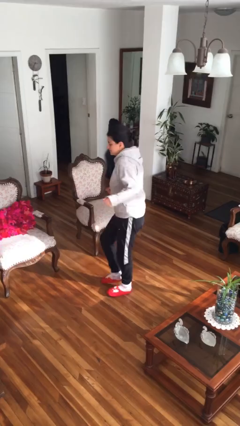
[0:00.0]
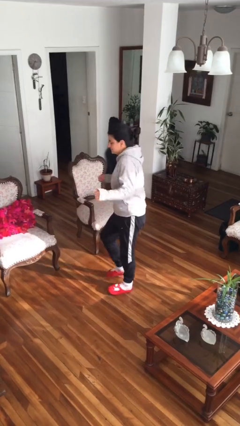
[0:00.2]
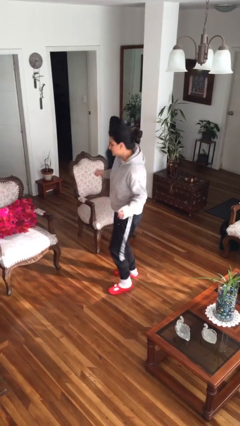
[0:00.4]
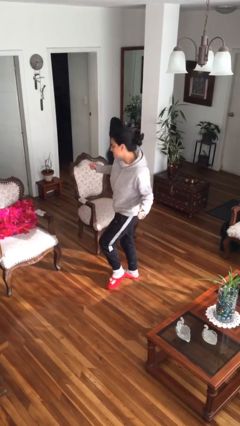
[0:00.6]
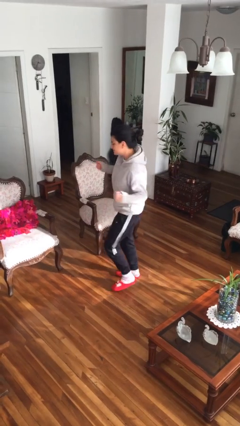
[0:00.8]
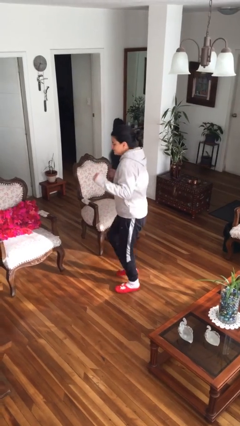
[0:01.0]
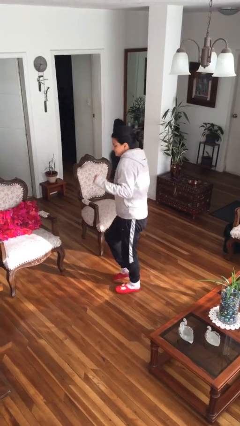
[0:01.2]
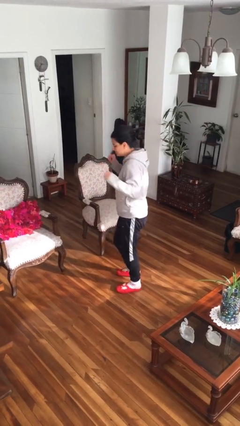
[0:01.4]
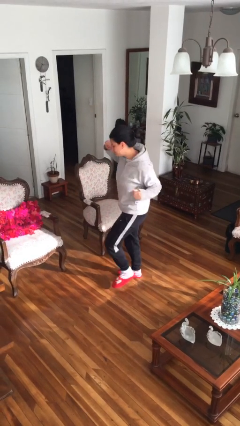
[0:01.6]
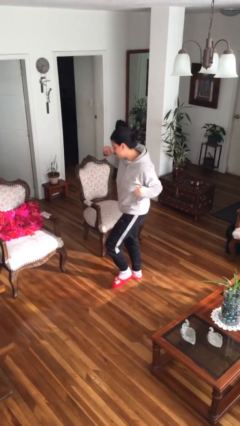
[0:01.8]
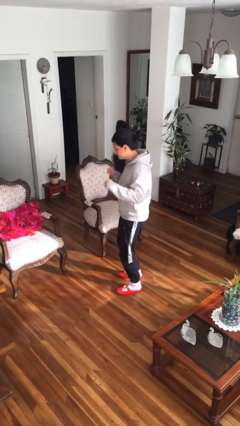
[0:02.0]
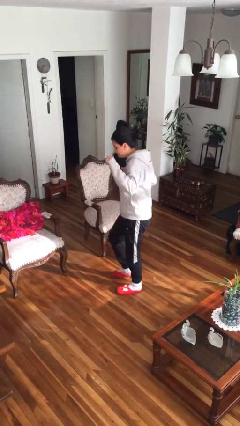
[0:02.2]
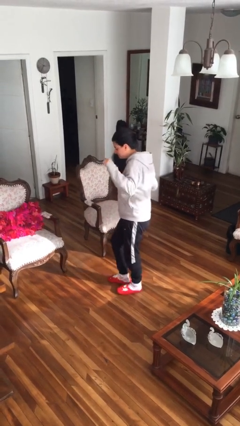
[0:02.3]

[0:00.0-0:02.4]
person dances in place

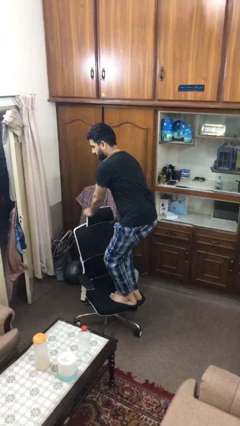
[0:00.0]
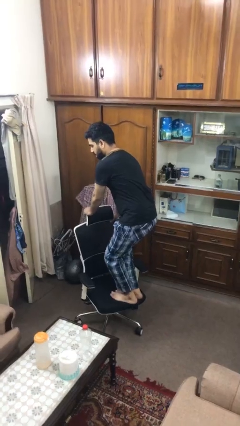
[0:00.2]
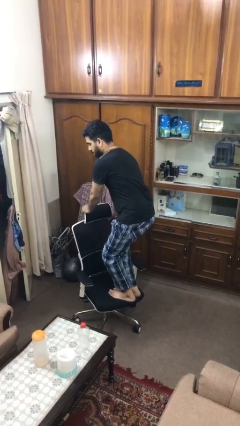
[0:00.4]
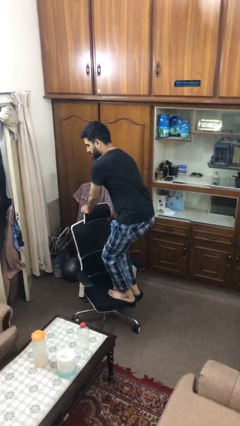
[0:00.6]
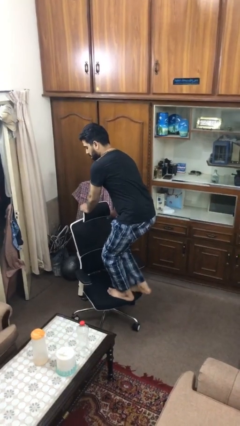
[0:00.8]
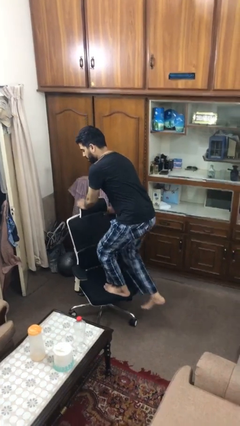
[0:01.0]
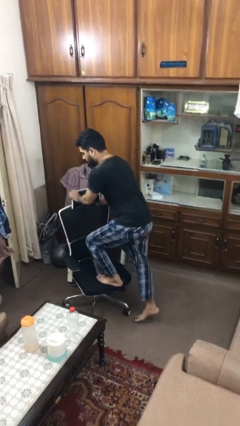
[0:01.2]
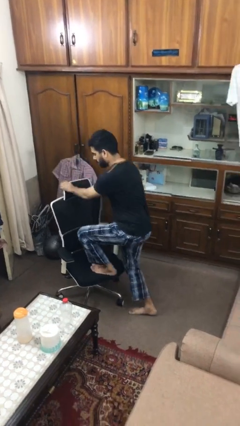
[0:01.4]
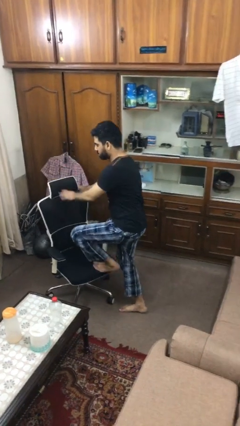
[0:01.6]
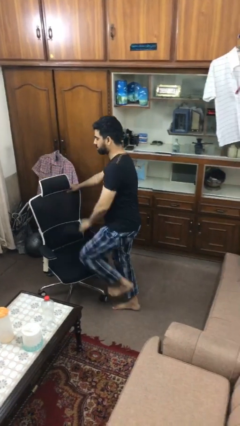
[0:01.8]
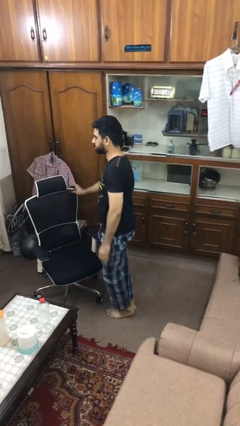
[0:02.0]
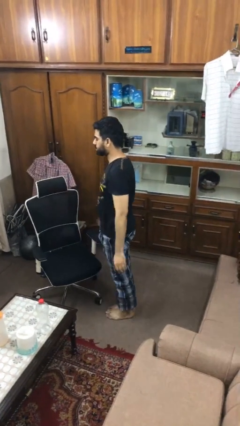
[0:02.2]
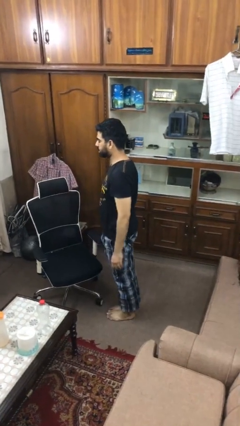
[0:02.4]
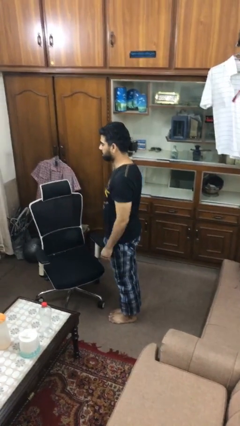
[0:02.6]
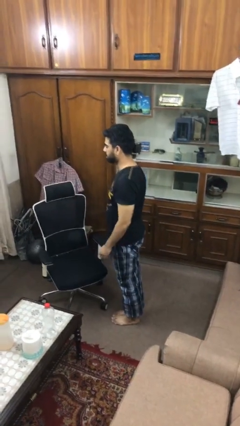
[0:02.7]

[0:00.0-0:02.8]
person climbs off chair

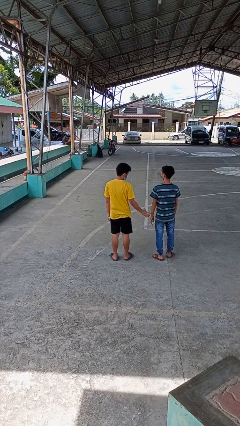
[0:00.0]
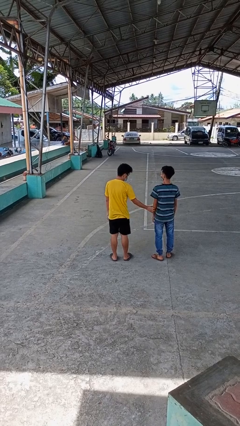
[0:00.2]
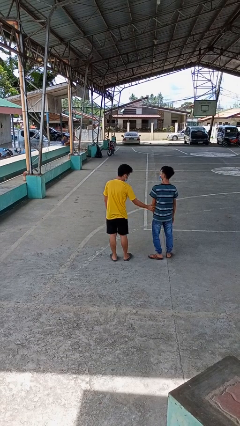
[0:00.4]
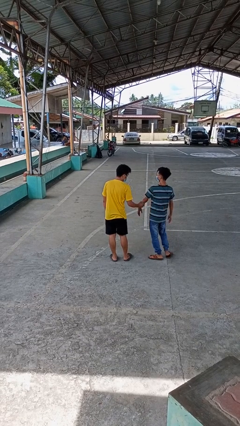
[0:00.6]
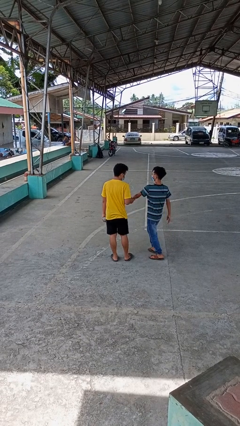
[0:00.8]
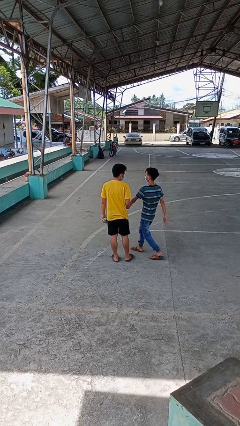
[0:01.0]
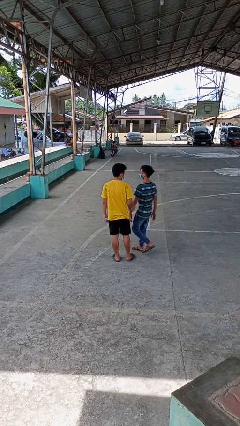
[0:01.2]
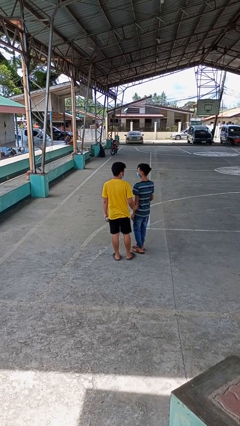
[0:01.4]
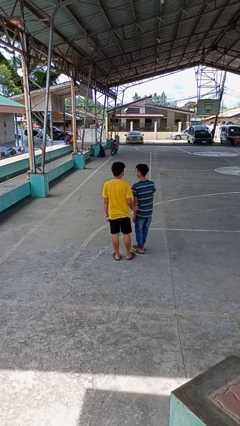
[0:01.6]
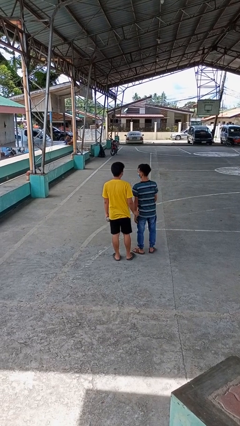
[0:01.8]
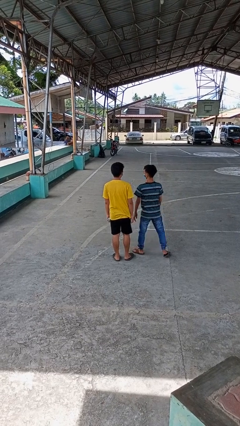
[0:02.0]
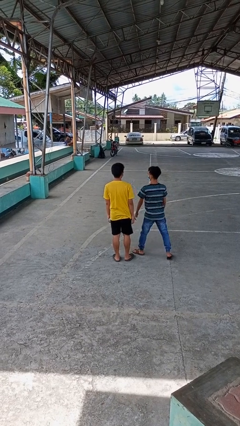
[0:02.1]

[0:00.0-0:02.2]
person grabs person by forearm

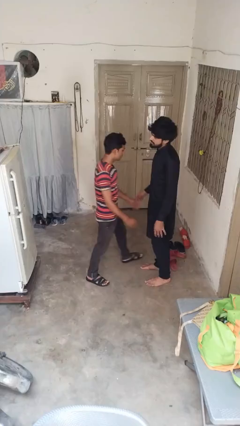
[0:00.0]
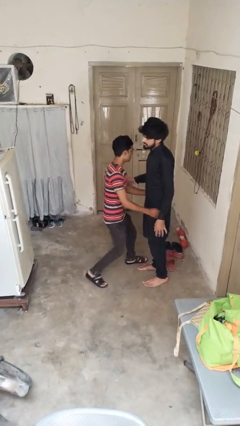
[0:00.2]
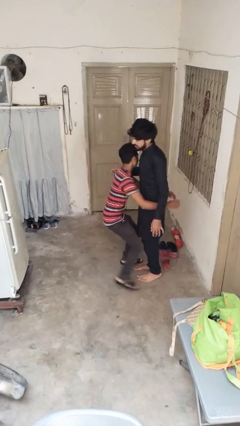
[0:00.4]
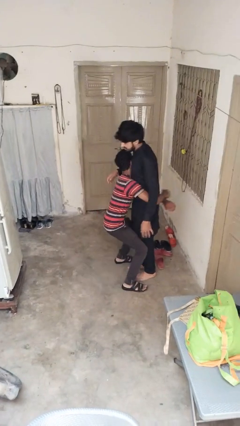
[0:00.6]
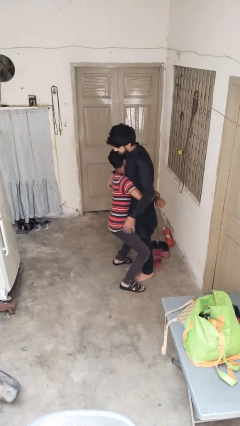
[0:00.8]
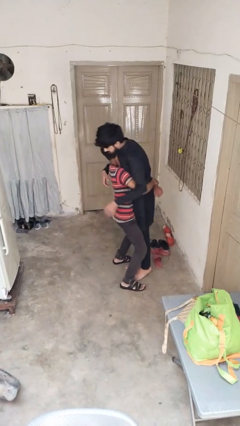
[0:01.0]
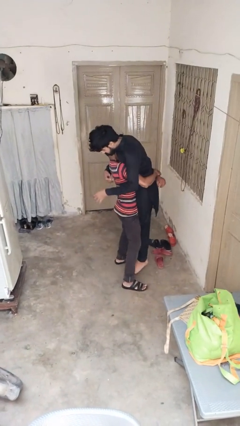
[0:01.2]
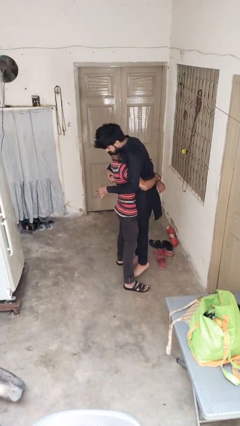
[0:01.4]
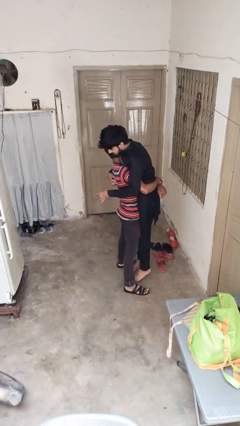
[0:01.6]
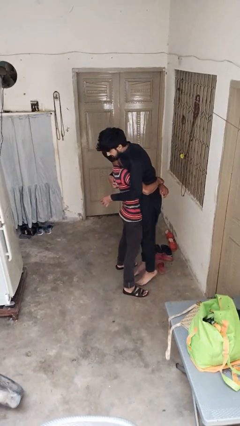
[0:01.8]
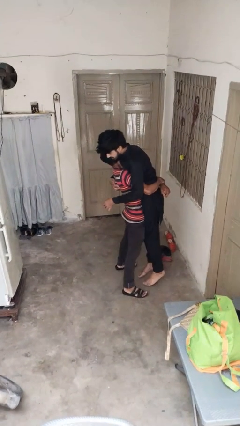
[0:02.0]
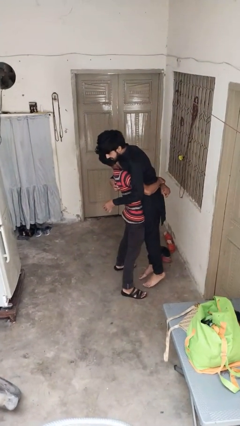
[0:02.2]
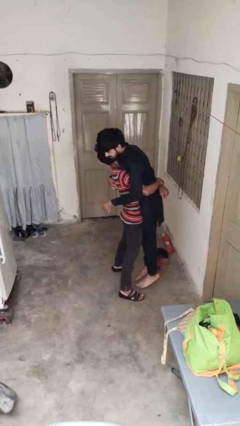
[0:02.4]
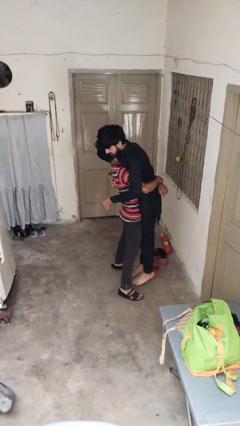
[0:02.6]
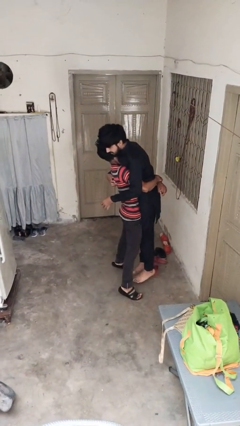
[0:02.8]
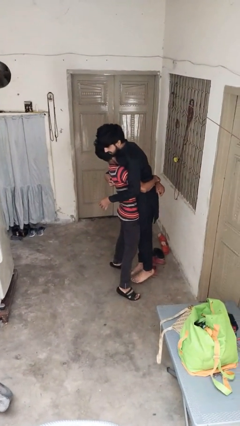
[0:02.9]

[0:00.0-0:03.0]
person picks up person

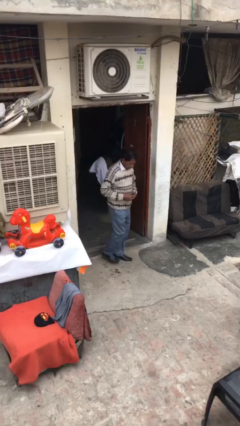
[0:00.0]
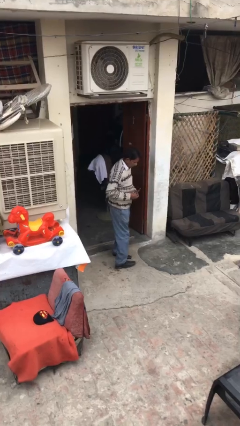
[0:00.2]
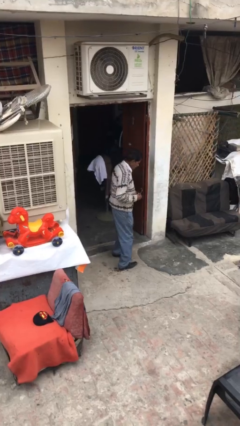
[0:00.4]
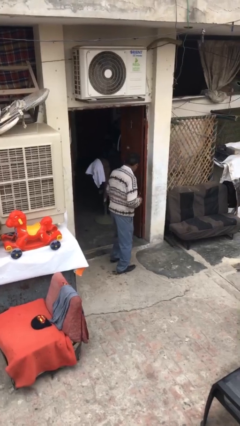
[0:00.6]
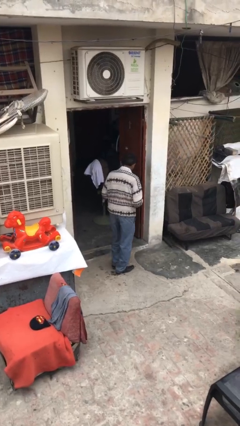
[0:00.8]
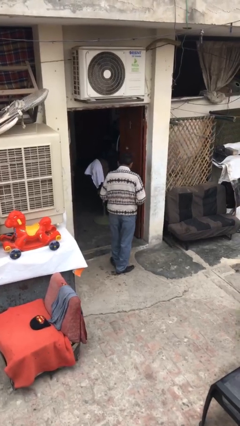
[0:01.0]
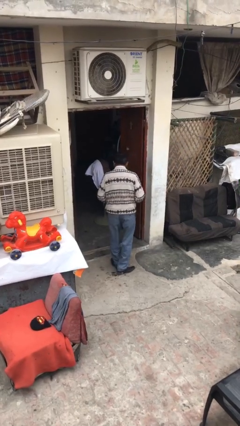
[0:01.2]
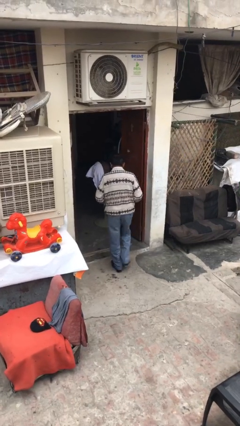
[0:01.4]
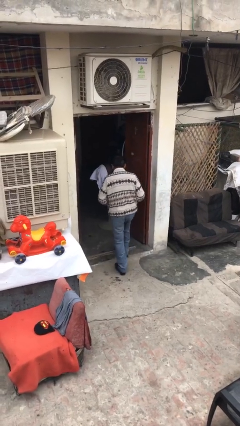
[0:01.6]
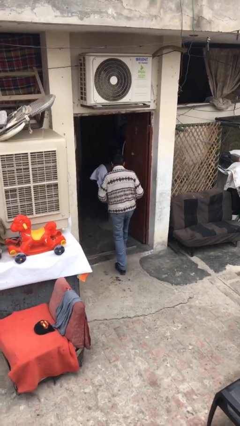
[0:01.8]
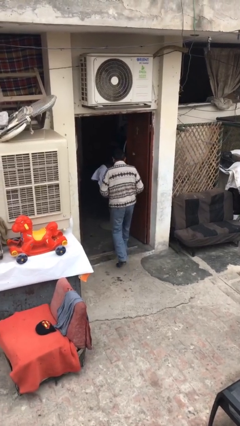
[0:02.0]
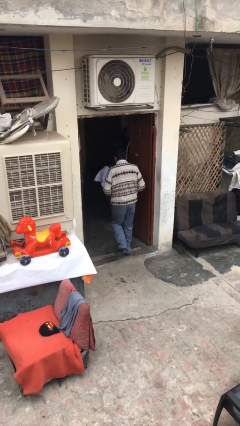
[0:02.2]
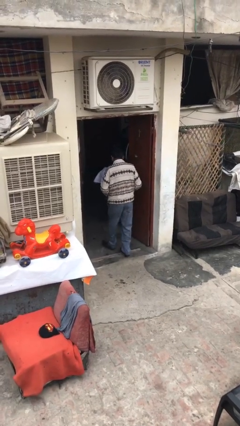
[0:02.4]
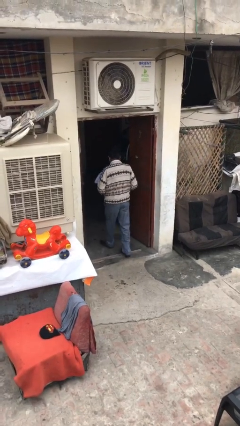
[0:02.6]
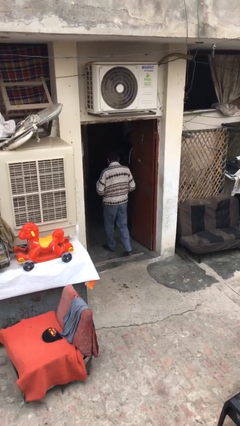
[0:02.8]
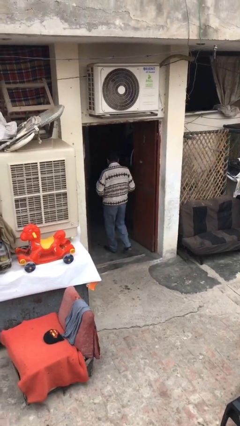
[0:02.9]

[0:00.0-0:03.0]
person exits scene through structure

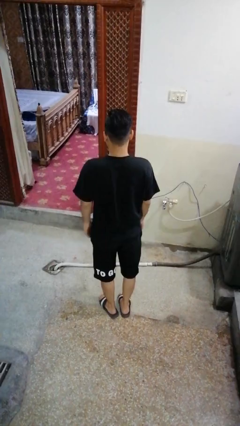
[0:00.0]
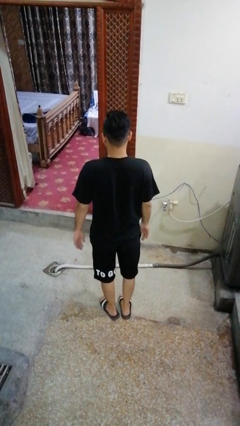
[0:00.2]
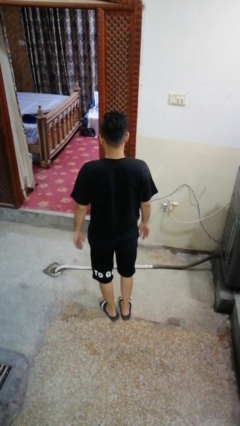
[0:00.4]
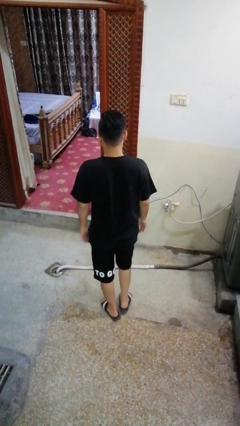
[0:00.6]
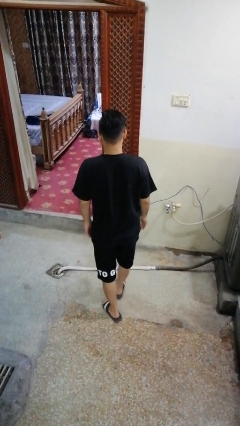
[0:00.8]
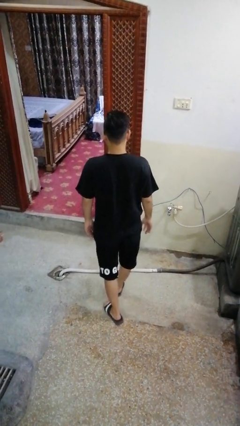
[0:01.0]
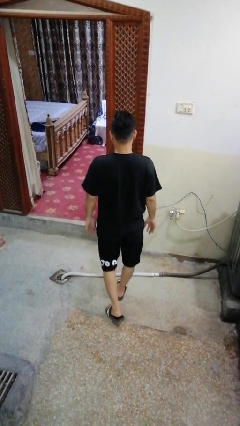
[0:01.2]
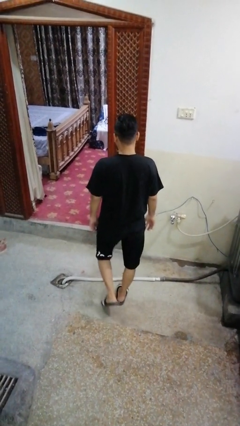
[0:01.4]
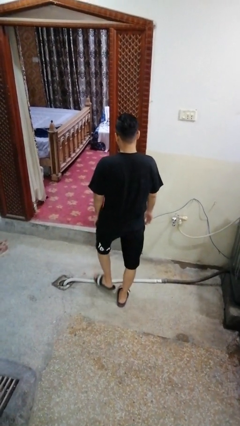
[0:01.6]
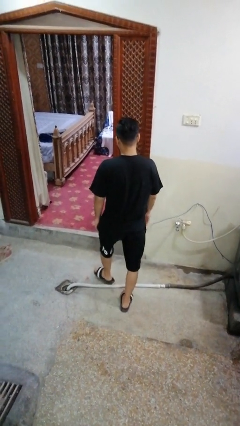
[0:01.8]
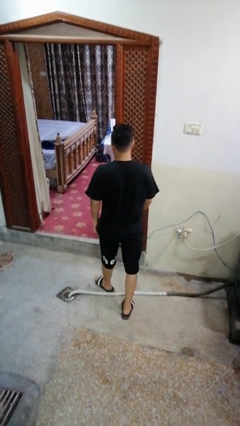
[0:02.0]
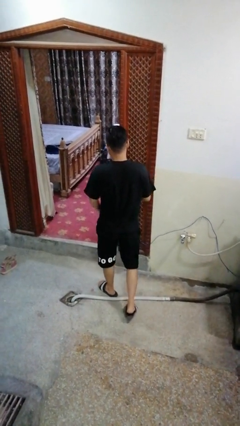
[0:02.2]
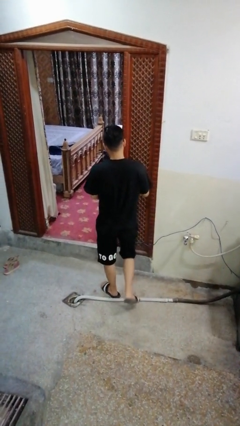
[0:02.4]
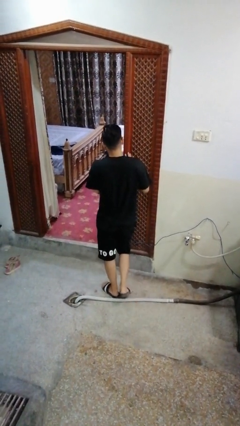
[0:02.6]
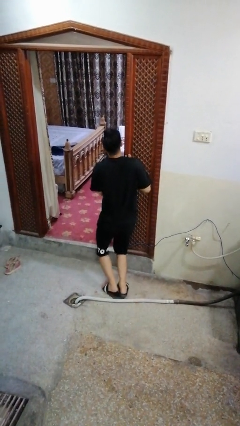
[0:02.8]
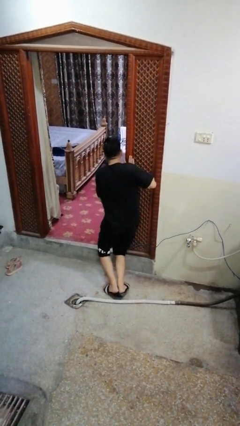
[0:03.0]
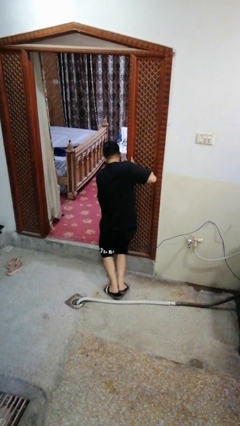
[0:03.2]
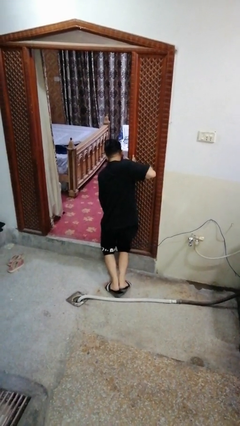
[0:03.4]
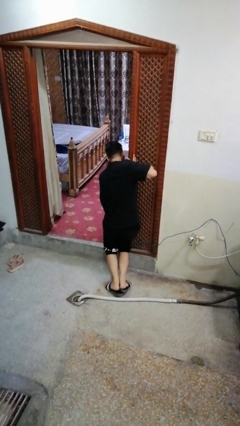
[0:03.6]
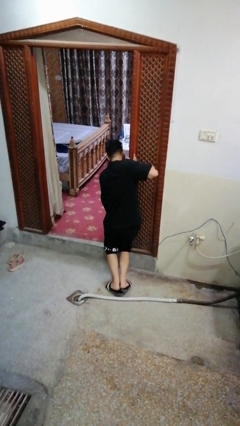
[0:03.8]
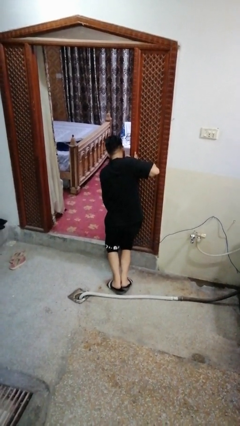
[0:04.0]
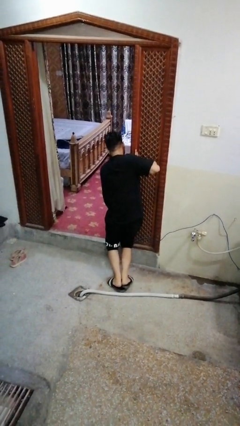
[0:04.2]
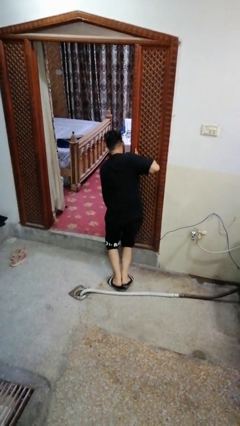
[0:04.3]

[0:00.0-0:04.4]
person bumps into wall
